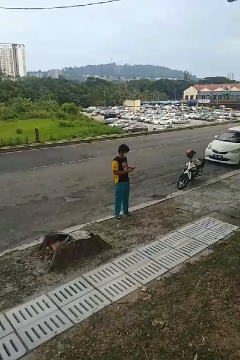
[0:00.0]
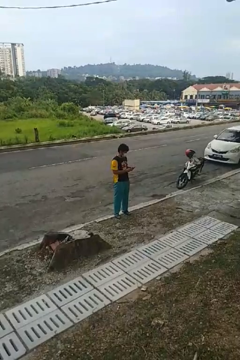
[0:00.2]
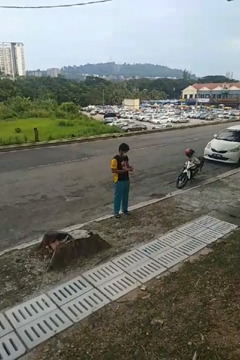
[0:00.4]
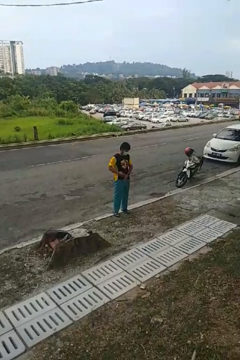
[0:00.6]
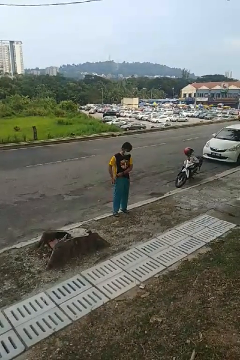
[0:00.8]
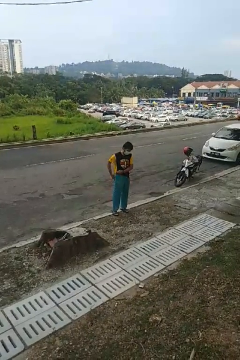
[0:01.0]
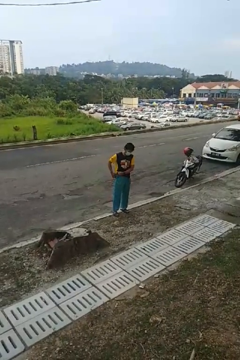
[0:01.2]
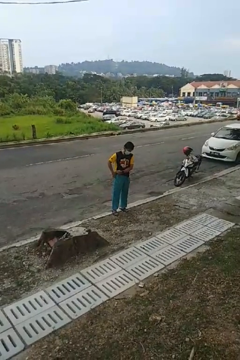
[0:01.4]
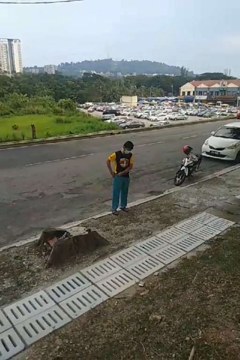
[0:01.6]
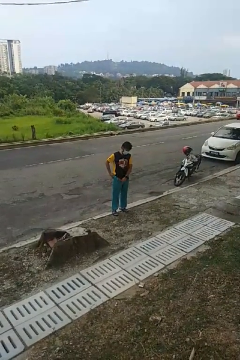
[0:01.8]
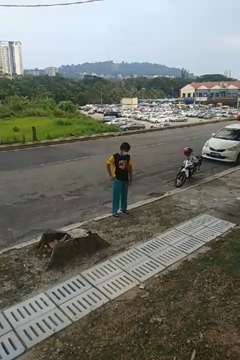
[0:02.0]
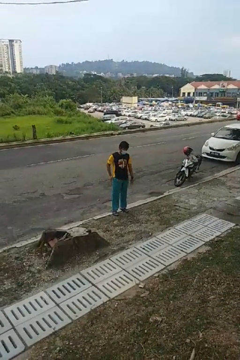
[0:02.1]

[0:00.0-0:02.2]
person puts phone into pocket

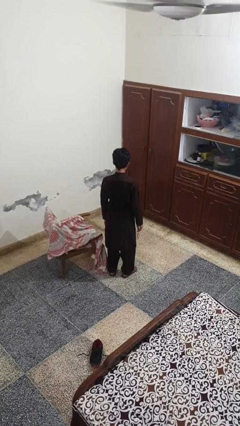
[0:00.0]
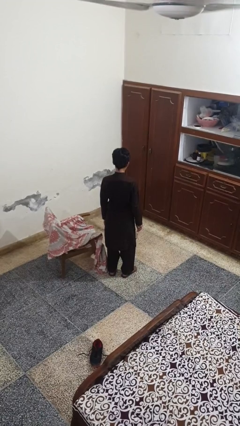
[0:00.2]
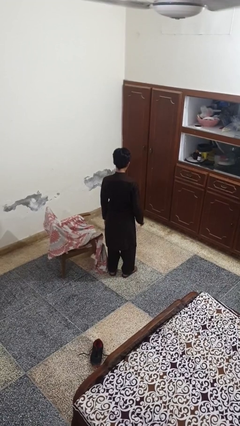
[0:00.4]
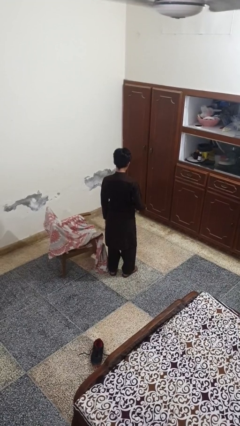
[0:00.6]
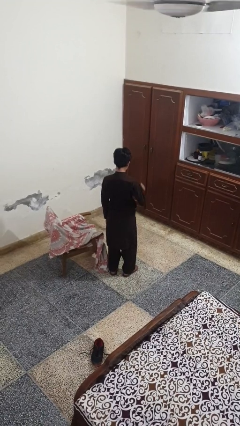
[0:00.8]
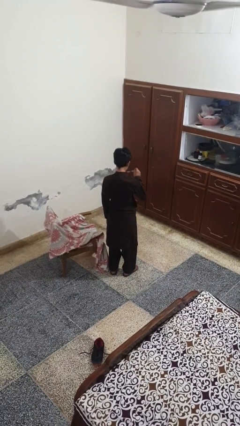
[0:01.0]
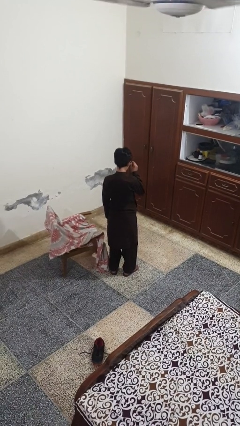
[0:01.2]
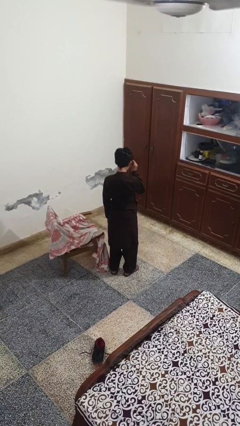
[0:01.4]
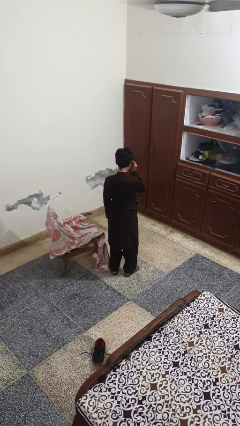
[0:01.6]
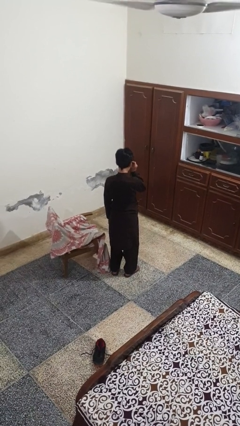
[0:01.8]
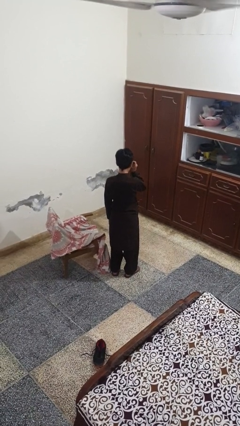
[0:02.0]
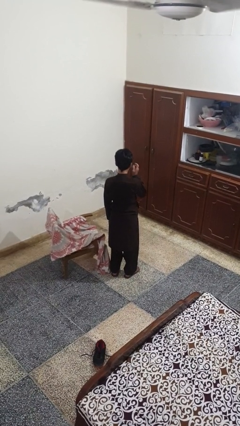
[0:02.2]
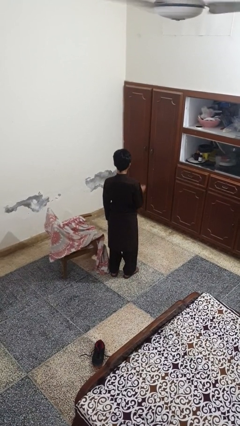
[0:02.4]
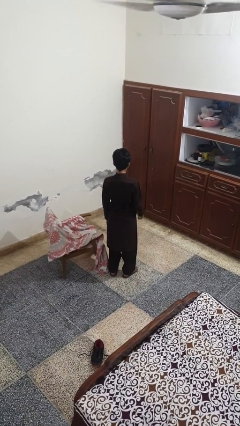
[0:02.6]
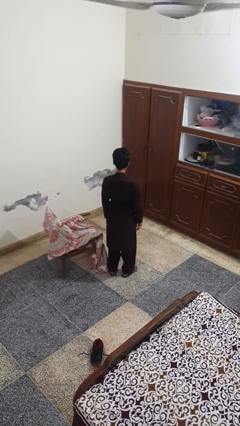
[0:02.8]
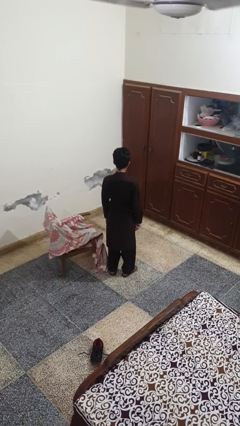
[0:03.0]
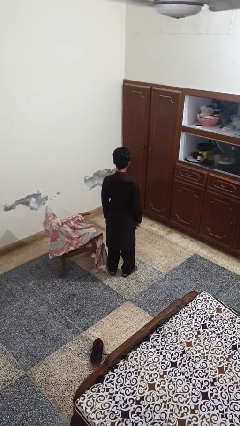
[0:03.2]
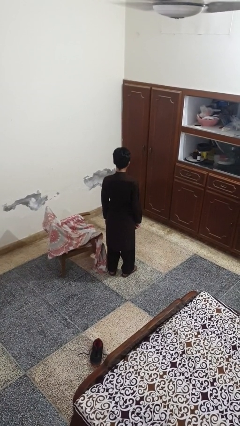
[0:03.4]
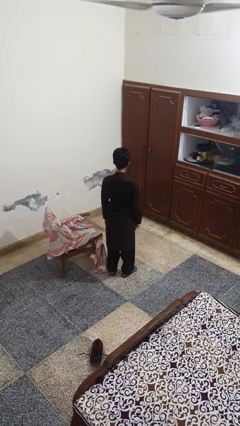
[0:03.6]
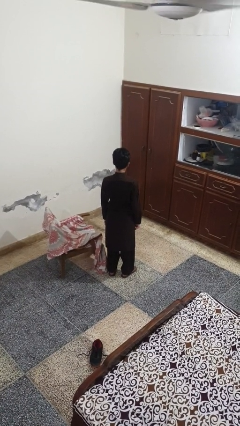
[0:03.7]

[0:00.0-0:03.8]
person puts on glasses

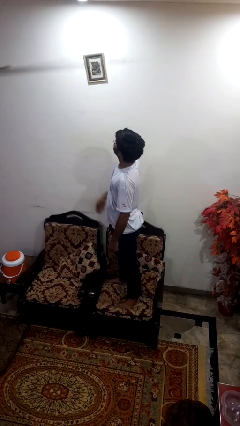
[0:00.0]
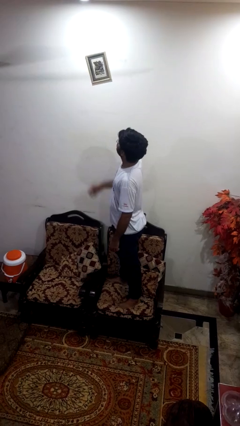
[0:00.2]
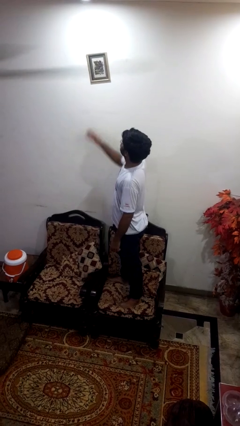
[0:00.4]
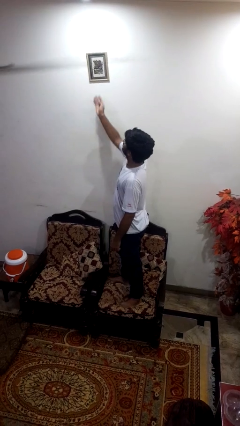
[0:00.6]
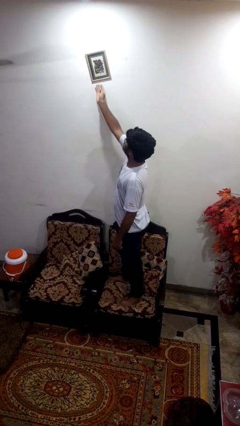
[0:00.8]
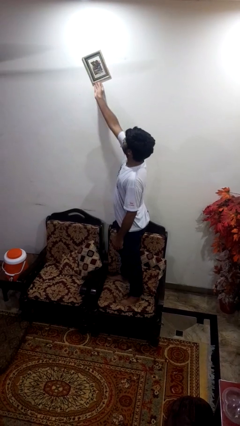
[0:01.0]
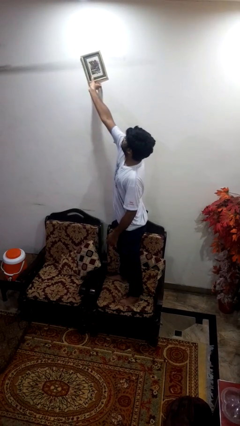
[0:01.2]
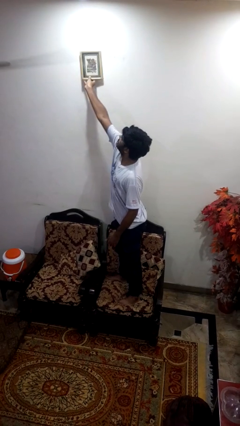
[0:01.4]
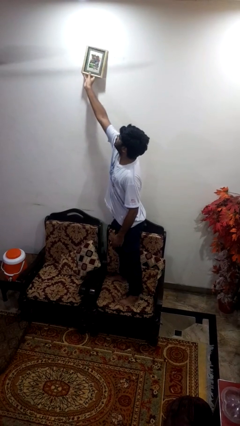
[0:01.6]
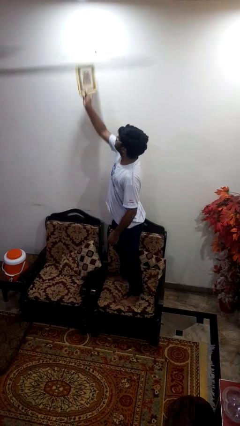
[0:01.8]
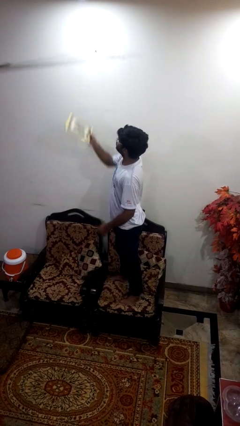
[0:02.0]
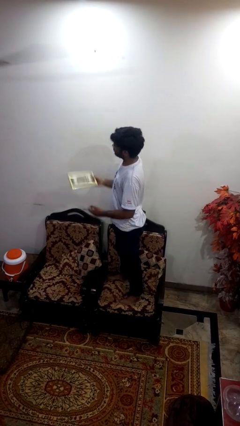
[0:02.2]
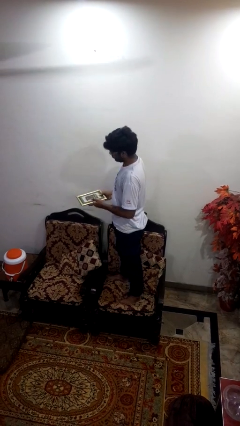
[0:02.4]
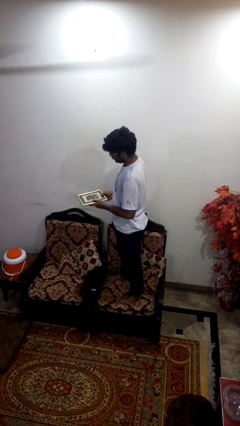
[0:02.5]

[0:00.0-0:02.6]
person takes down picture frame

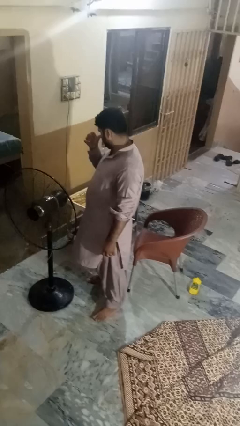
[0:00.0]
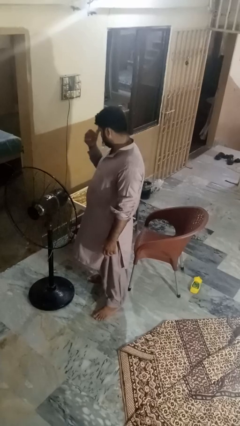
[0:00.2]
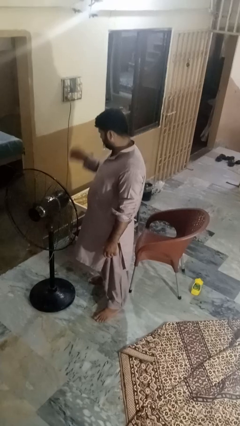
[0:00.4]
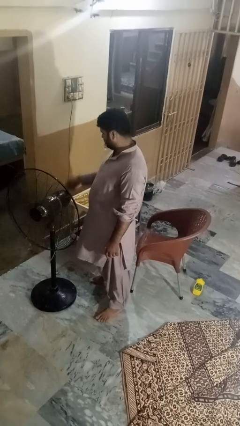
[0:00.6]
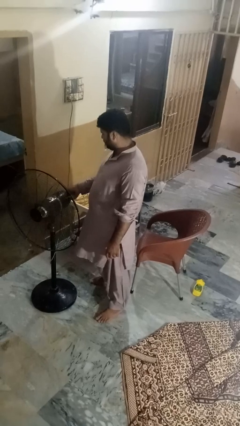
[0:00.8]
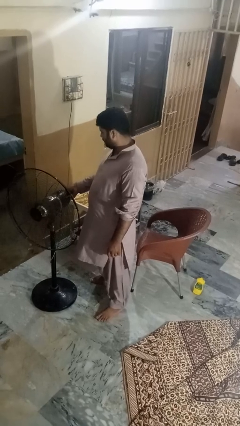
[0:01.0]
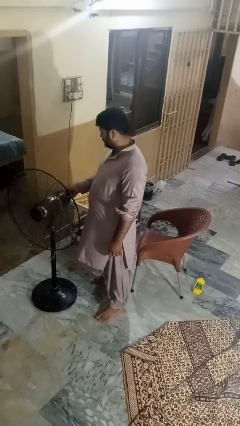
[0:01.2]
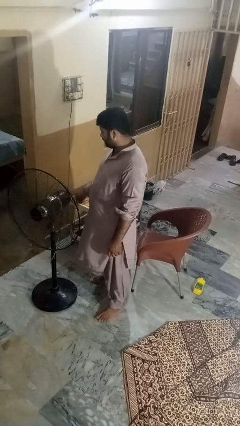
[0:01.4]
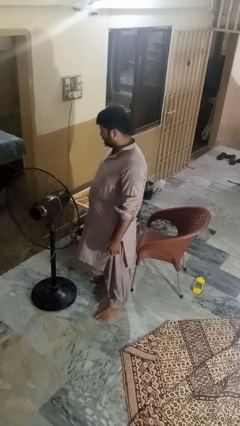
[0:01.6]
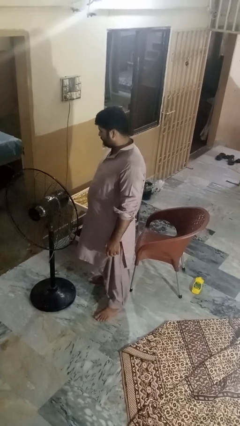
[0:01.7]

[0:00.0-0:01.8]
person turns off fan

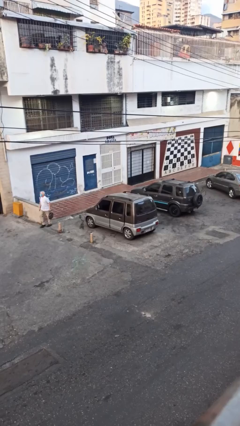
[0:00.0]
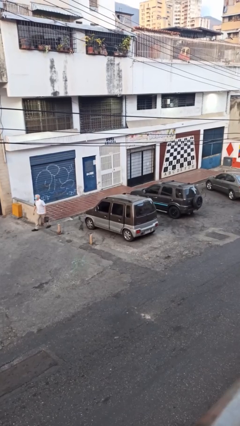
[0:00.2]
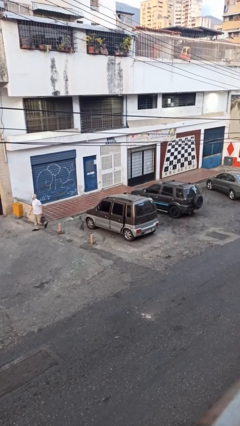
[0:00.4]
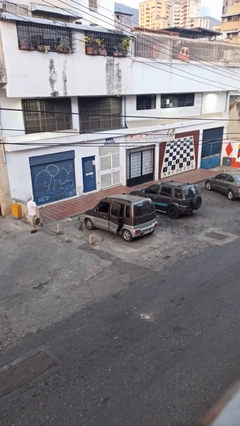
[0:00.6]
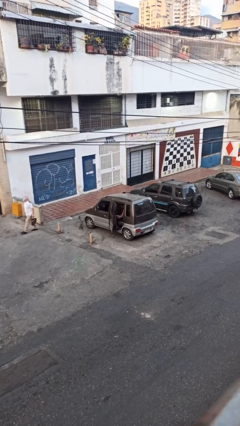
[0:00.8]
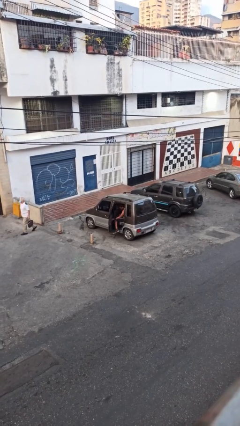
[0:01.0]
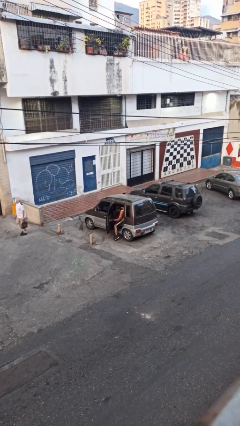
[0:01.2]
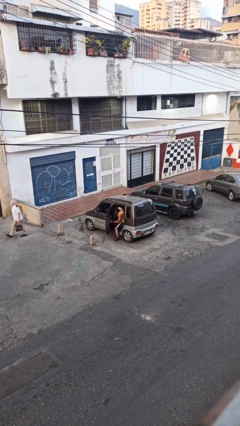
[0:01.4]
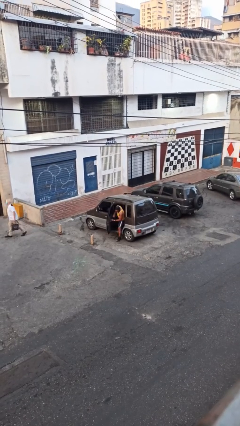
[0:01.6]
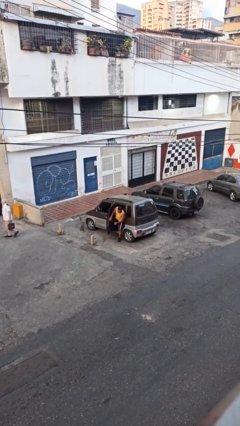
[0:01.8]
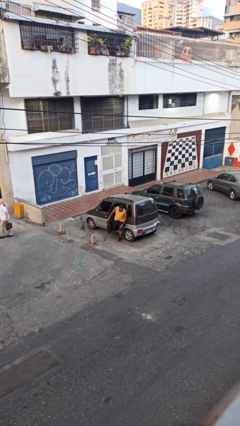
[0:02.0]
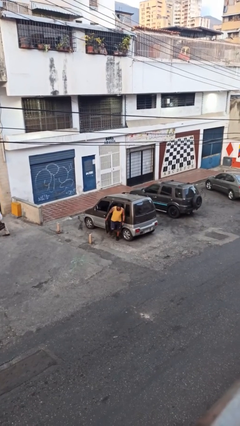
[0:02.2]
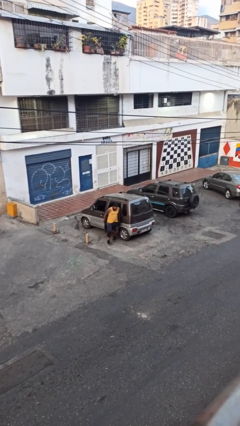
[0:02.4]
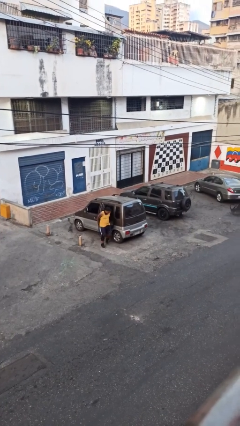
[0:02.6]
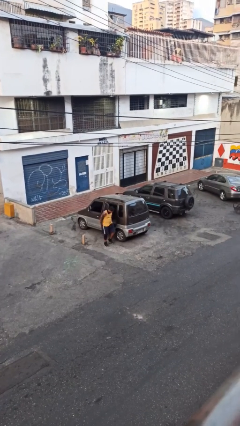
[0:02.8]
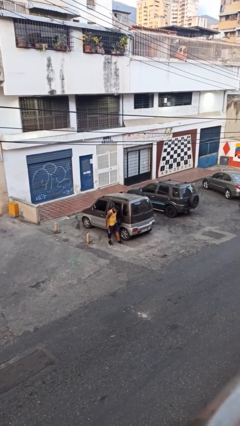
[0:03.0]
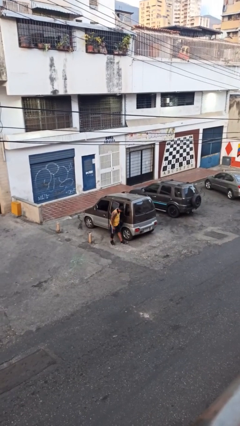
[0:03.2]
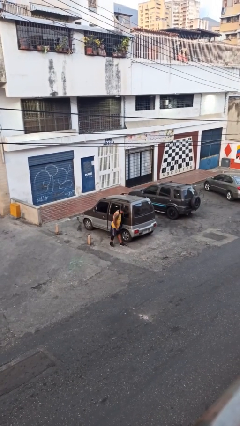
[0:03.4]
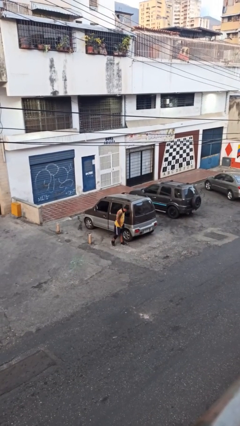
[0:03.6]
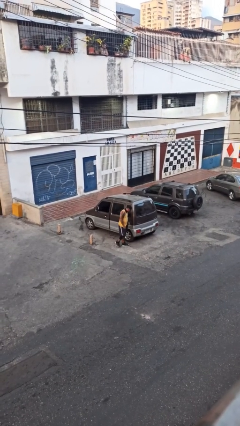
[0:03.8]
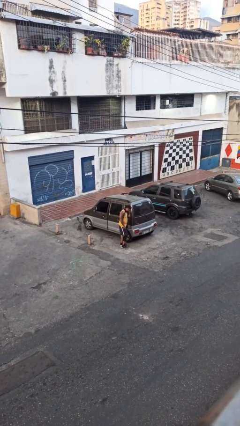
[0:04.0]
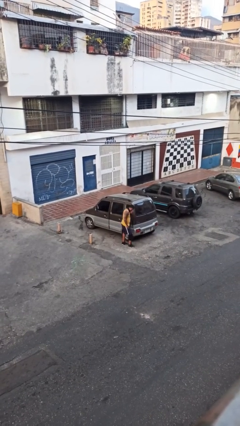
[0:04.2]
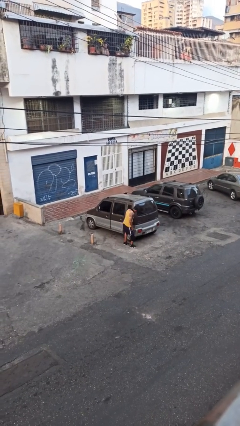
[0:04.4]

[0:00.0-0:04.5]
car drops off person

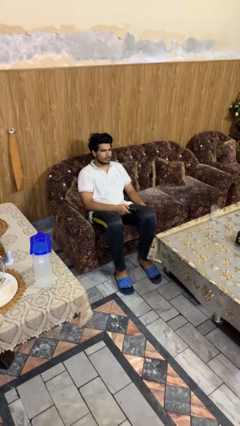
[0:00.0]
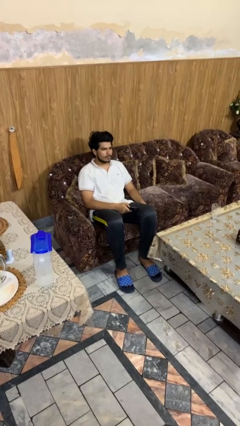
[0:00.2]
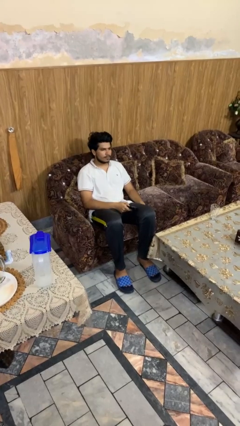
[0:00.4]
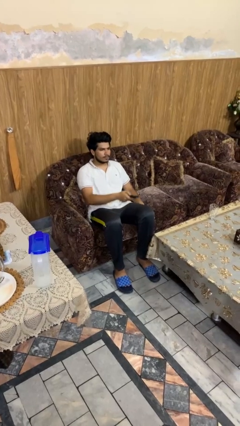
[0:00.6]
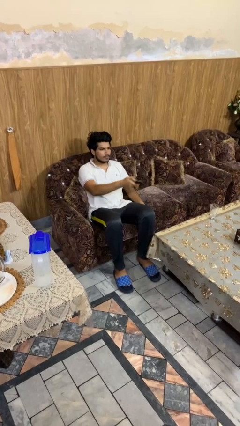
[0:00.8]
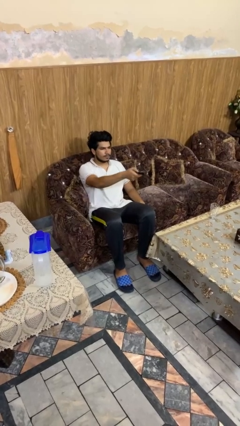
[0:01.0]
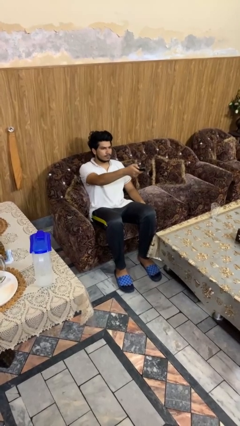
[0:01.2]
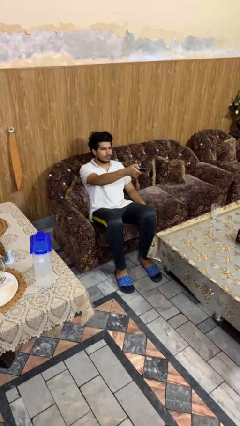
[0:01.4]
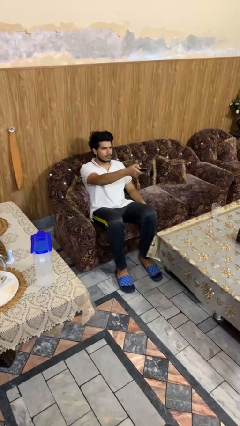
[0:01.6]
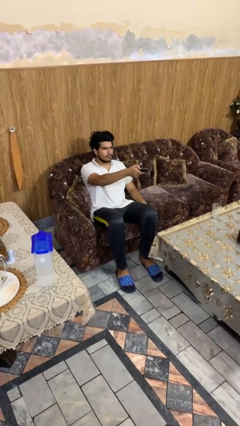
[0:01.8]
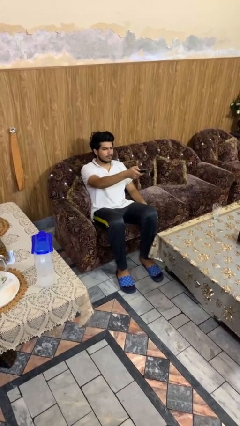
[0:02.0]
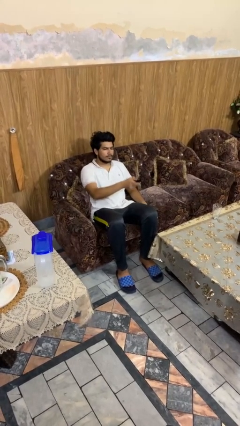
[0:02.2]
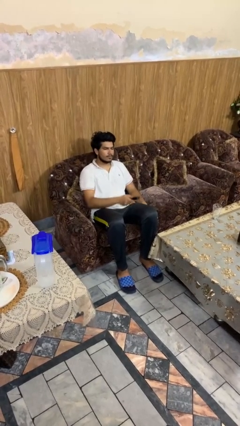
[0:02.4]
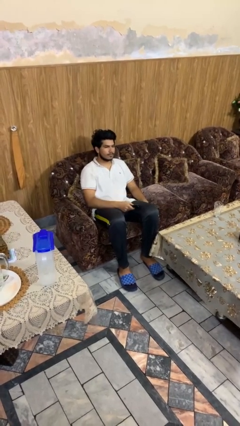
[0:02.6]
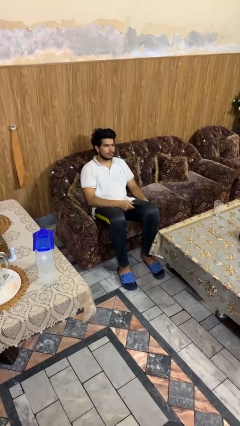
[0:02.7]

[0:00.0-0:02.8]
person uses television remote
